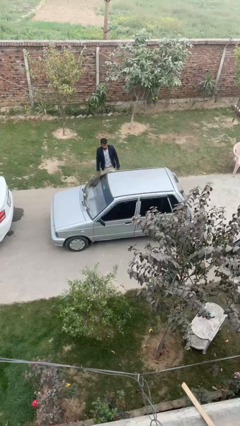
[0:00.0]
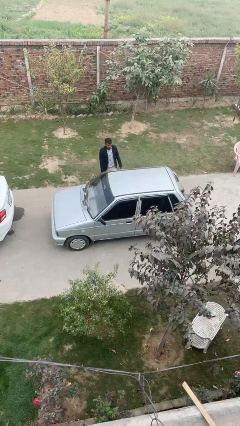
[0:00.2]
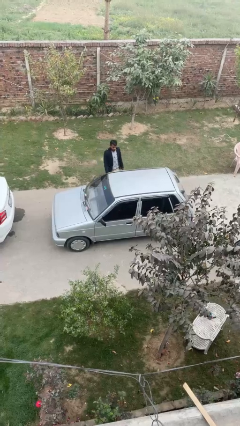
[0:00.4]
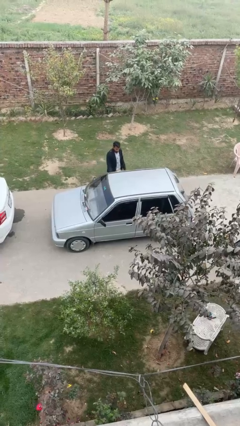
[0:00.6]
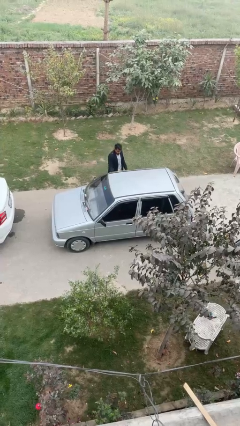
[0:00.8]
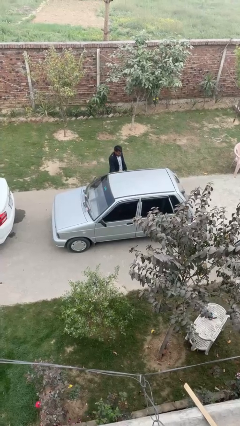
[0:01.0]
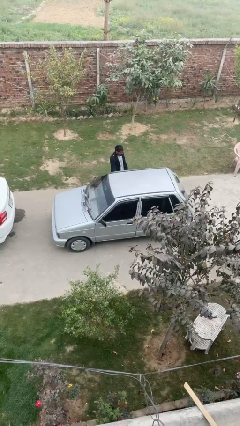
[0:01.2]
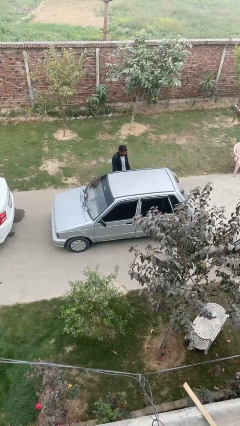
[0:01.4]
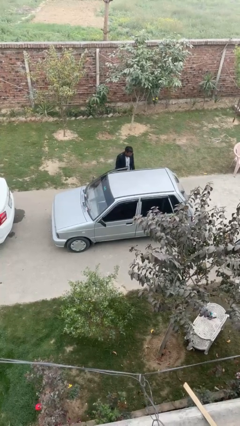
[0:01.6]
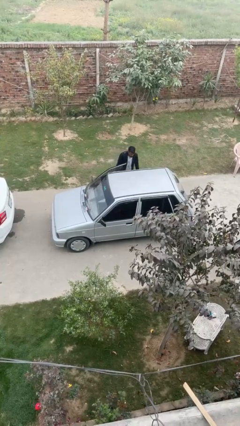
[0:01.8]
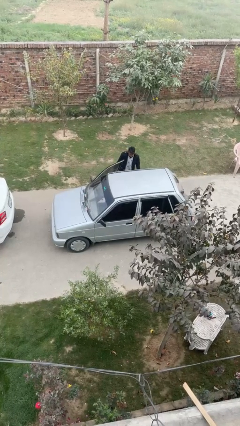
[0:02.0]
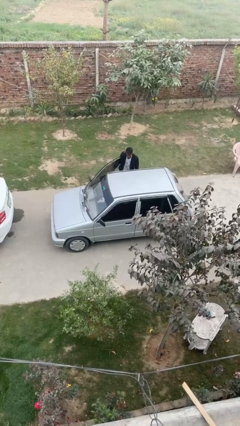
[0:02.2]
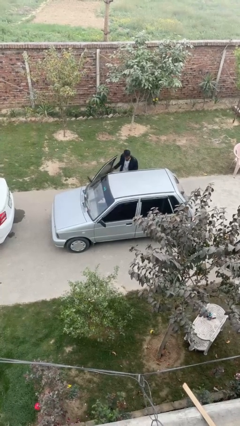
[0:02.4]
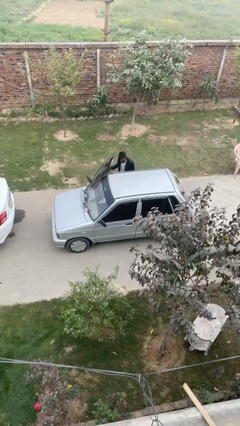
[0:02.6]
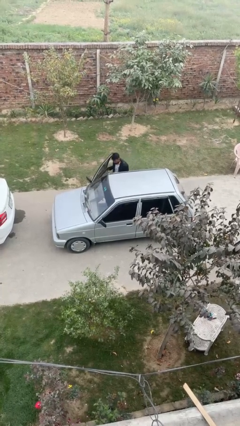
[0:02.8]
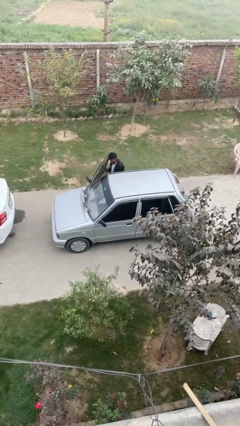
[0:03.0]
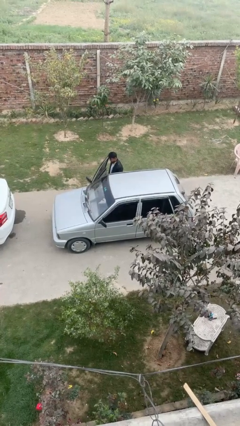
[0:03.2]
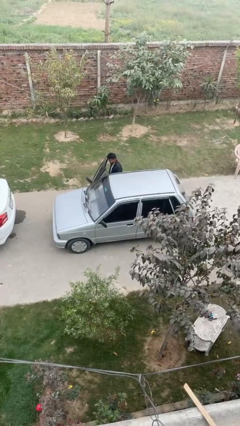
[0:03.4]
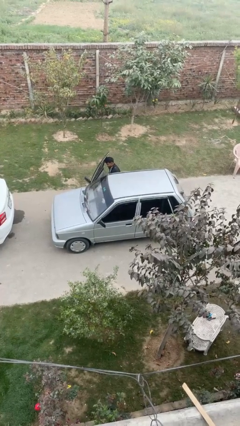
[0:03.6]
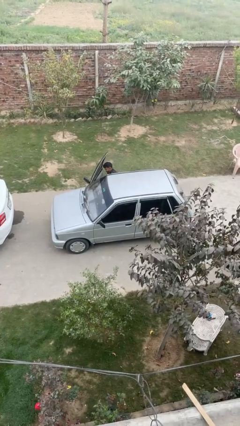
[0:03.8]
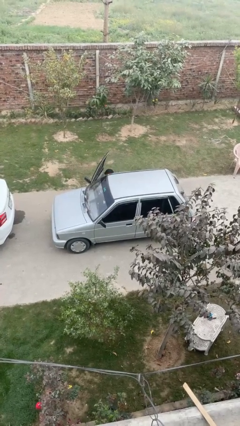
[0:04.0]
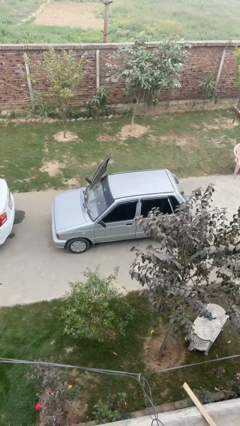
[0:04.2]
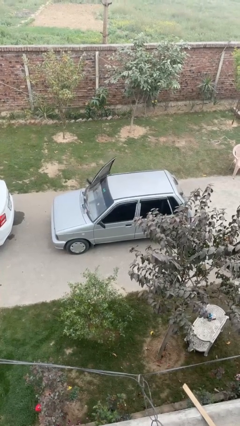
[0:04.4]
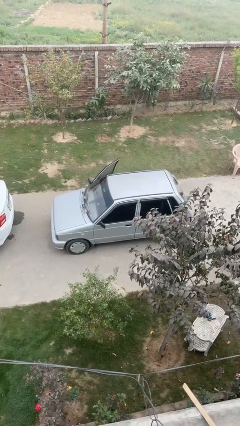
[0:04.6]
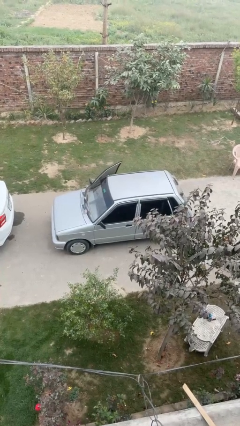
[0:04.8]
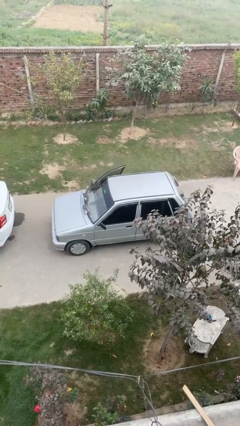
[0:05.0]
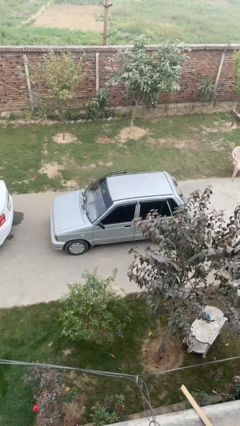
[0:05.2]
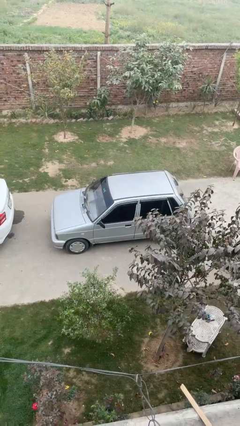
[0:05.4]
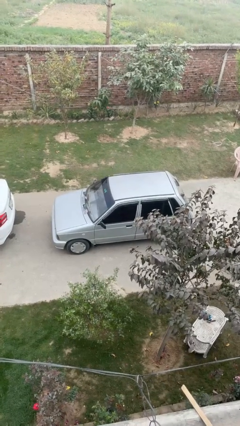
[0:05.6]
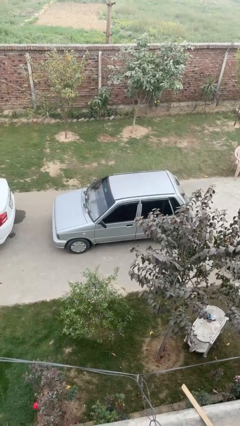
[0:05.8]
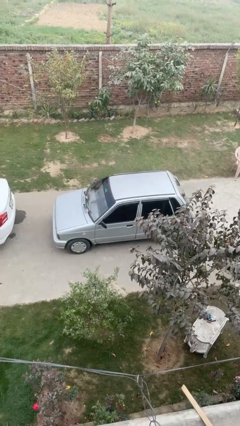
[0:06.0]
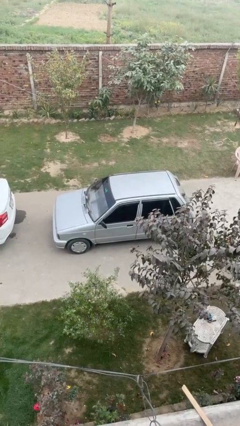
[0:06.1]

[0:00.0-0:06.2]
car picks up person

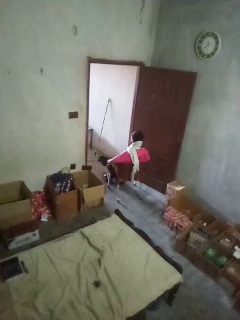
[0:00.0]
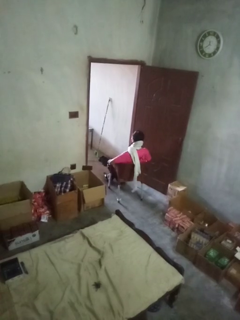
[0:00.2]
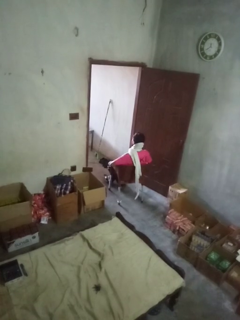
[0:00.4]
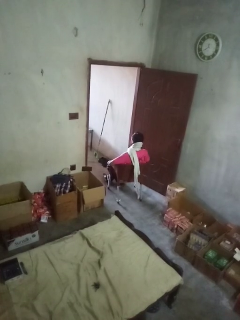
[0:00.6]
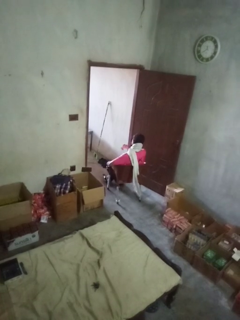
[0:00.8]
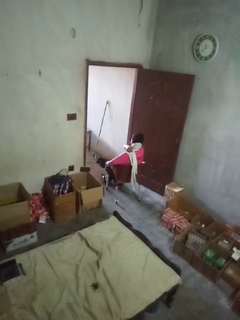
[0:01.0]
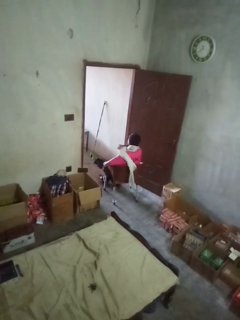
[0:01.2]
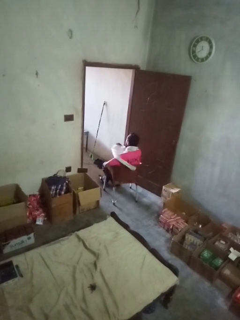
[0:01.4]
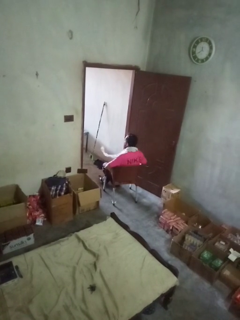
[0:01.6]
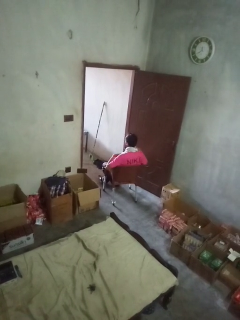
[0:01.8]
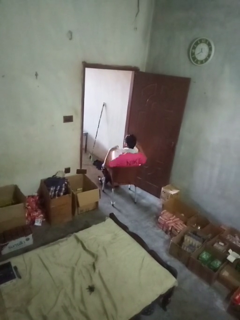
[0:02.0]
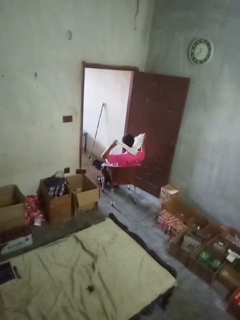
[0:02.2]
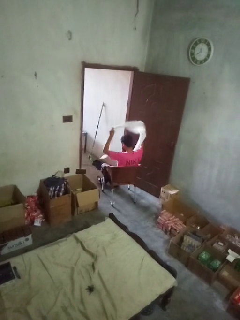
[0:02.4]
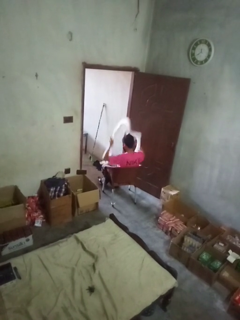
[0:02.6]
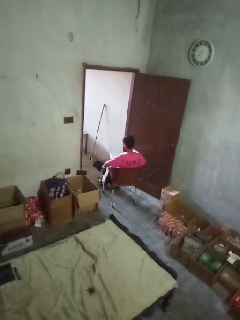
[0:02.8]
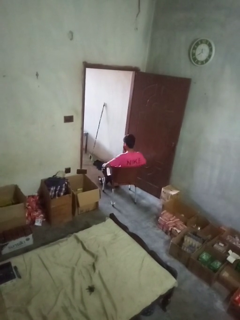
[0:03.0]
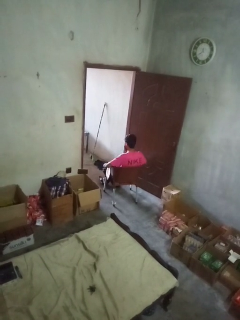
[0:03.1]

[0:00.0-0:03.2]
person takes off scarf

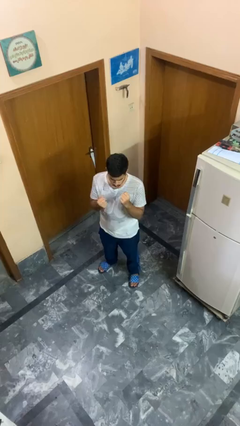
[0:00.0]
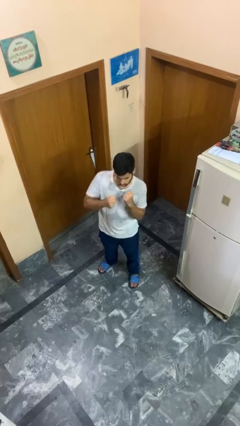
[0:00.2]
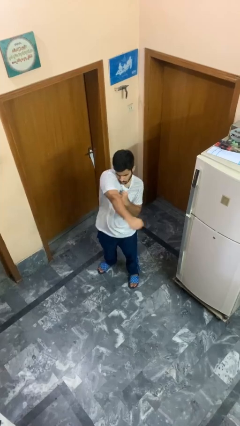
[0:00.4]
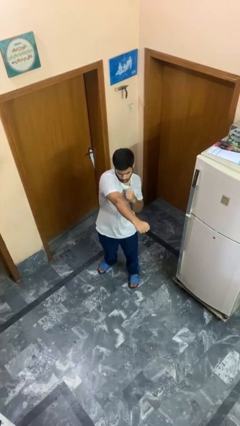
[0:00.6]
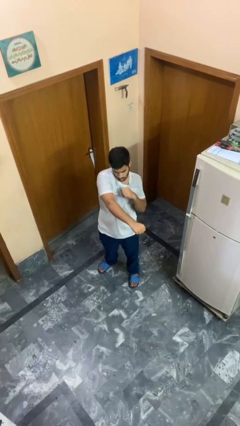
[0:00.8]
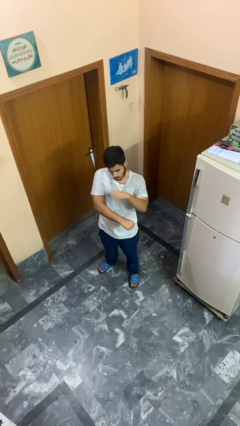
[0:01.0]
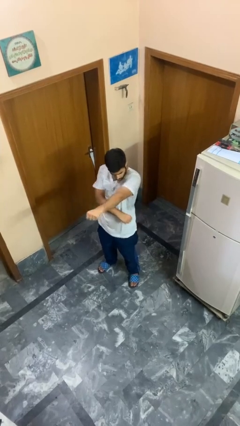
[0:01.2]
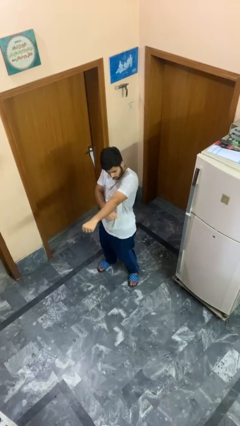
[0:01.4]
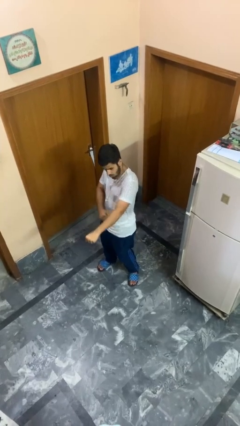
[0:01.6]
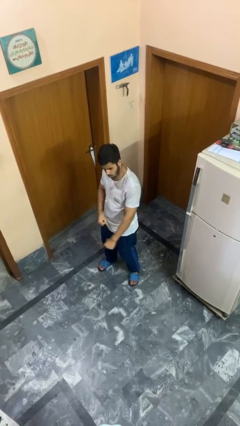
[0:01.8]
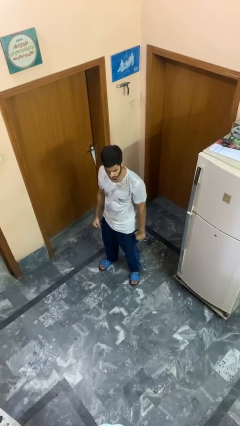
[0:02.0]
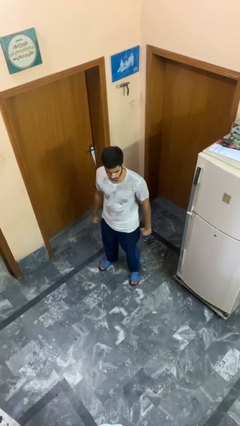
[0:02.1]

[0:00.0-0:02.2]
person punches

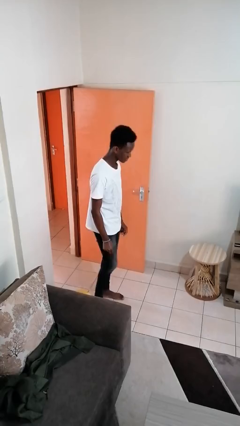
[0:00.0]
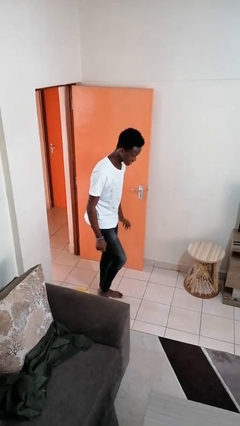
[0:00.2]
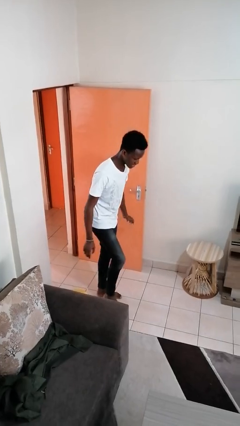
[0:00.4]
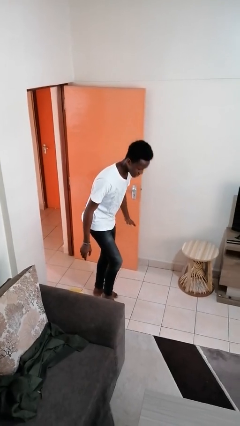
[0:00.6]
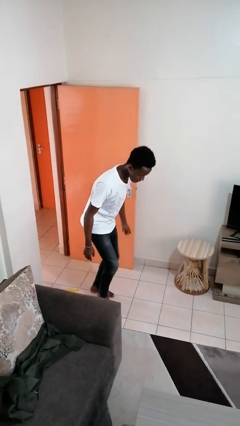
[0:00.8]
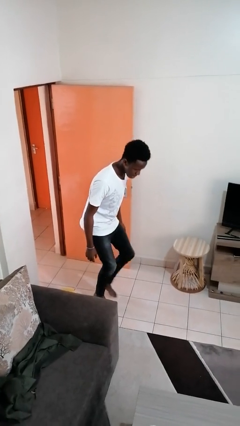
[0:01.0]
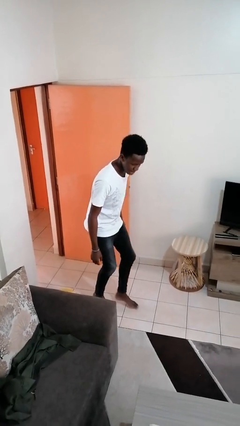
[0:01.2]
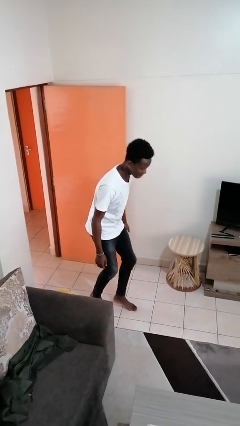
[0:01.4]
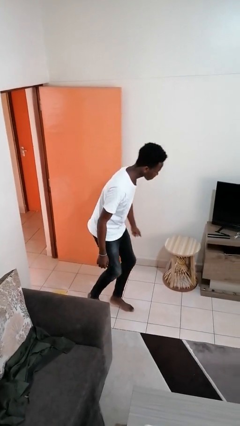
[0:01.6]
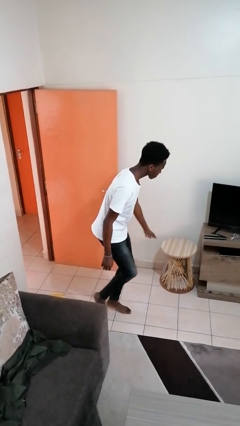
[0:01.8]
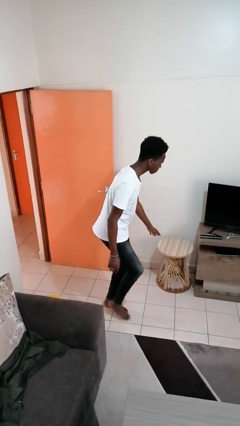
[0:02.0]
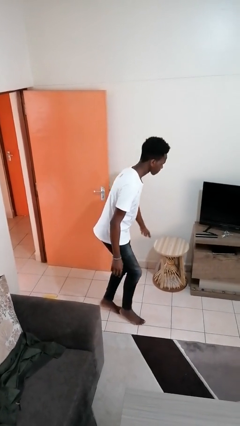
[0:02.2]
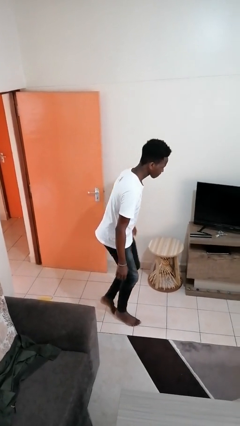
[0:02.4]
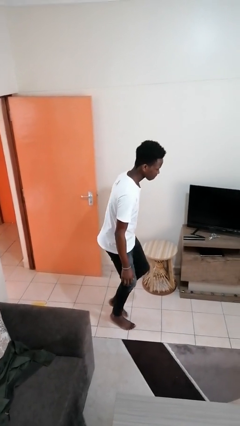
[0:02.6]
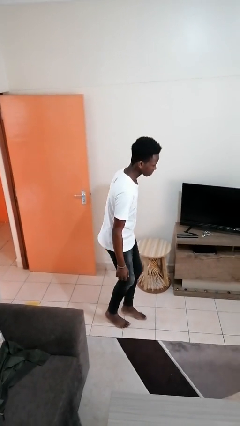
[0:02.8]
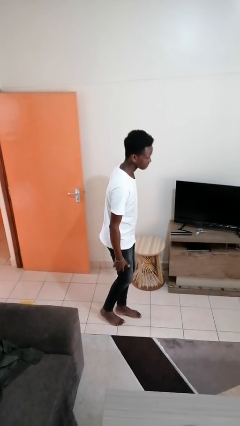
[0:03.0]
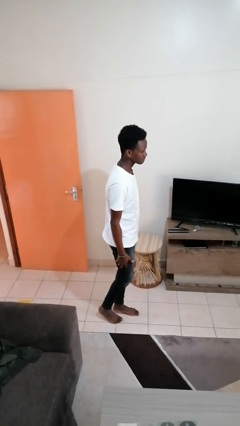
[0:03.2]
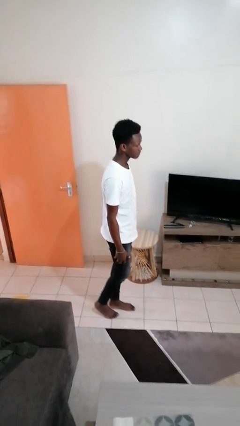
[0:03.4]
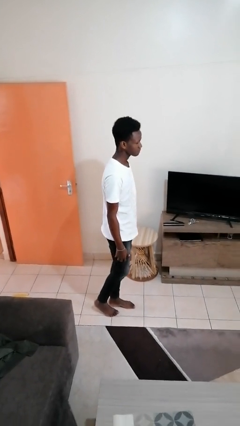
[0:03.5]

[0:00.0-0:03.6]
person walks tiptoe

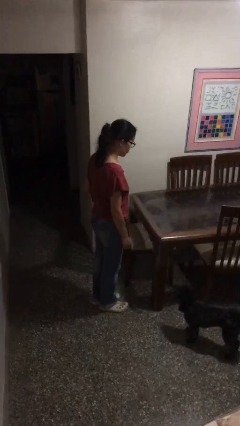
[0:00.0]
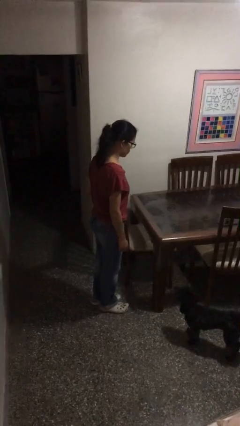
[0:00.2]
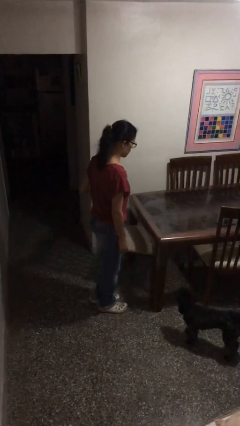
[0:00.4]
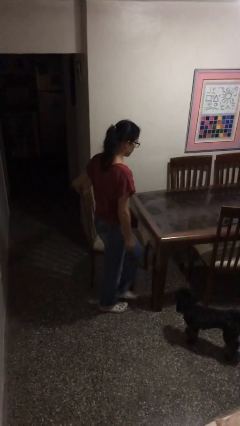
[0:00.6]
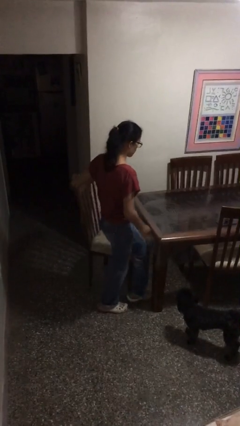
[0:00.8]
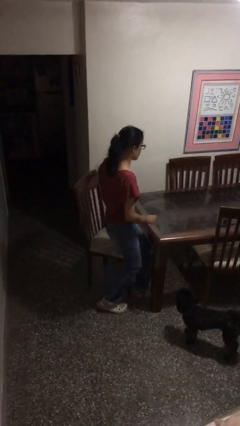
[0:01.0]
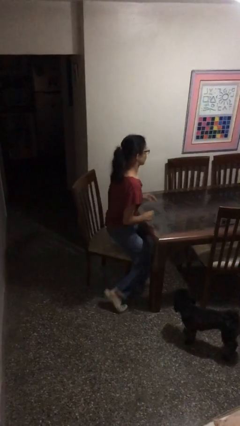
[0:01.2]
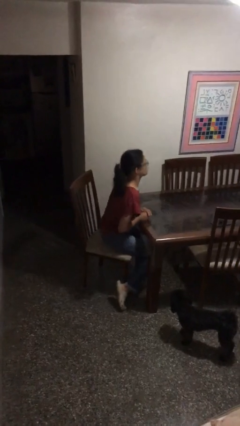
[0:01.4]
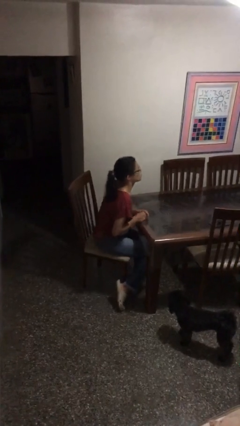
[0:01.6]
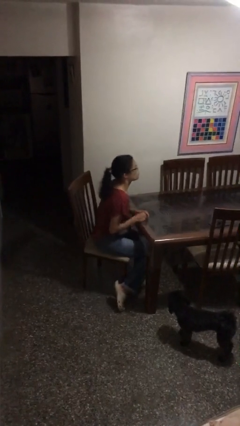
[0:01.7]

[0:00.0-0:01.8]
person sits down

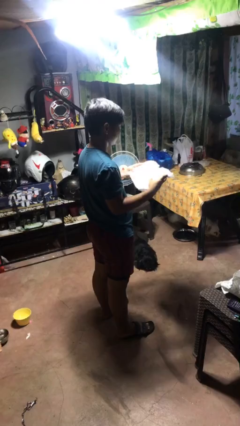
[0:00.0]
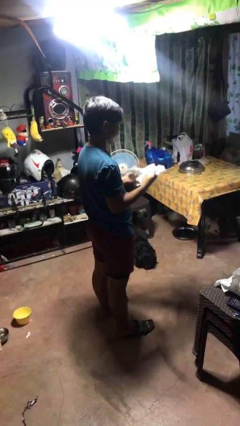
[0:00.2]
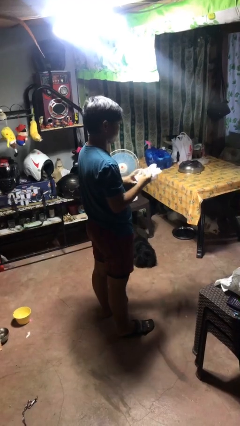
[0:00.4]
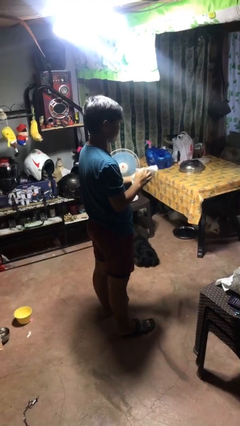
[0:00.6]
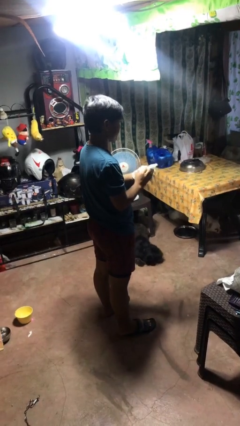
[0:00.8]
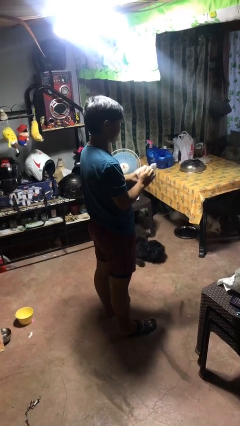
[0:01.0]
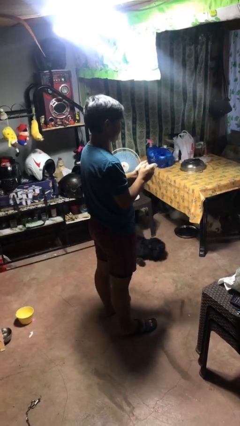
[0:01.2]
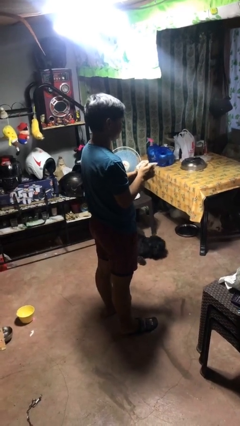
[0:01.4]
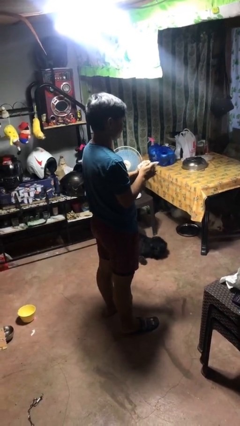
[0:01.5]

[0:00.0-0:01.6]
person crumples paper
